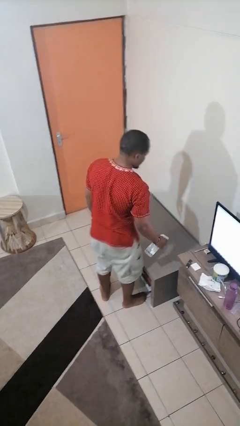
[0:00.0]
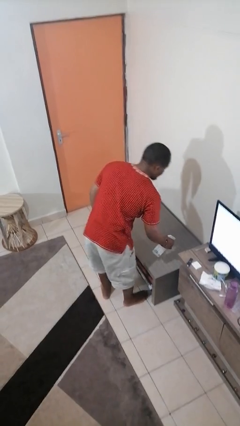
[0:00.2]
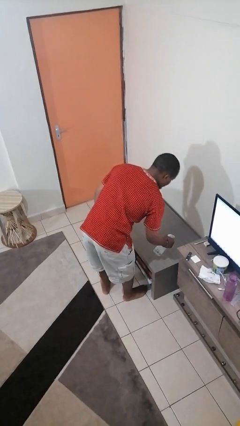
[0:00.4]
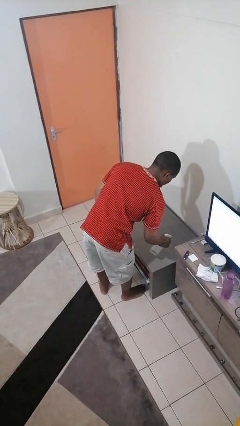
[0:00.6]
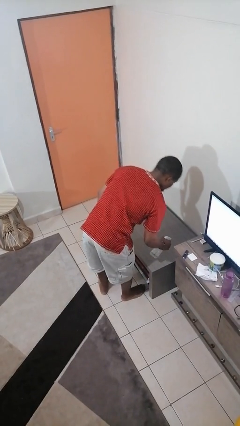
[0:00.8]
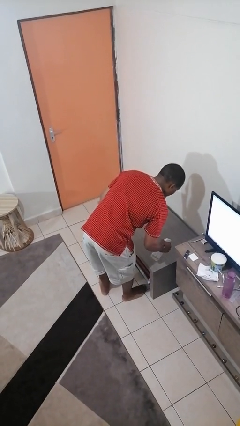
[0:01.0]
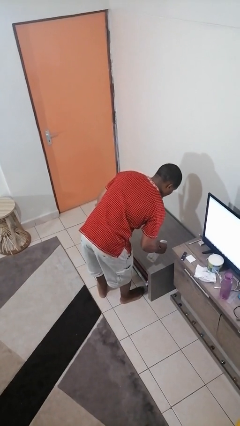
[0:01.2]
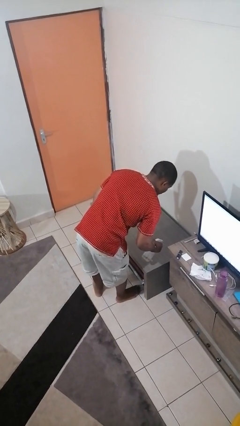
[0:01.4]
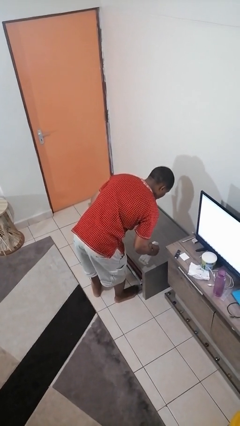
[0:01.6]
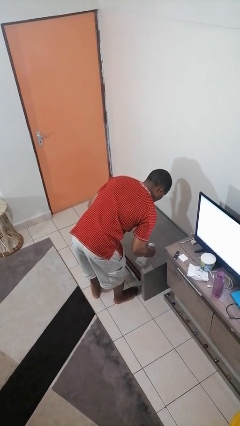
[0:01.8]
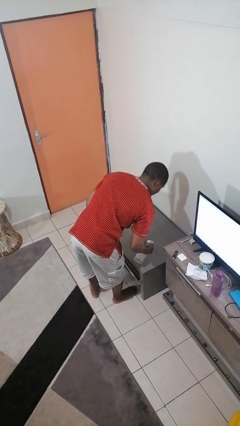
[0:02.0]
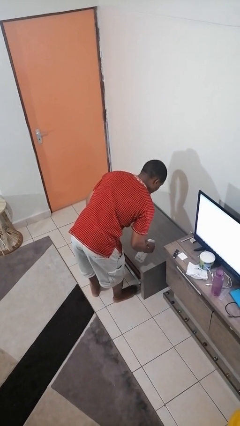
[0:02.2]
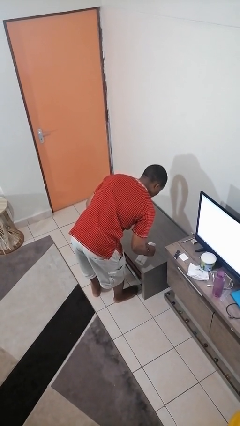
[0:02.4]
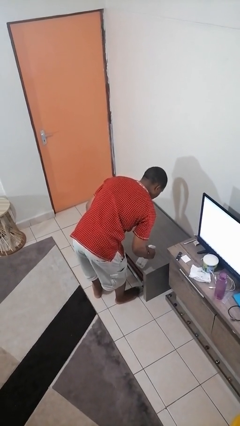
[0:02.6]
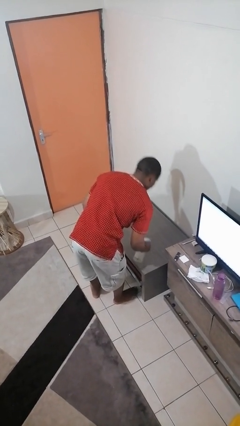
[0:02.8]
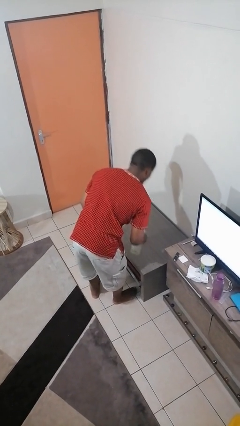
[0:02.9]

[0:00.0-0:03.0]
person sprays from bottle

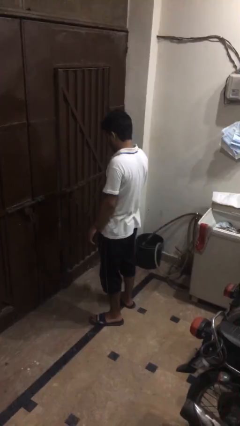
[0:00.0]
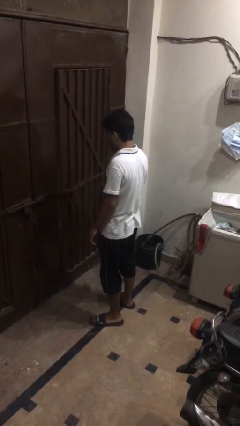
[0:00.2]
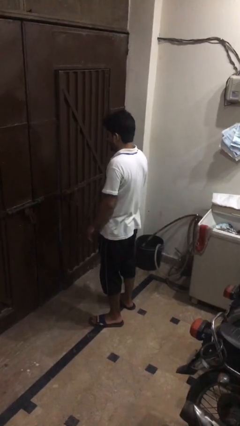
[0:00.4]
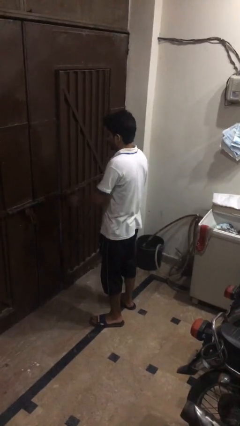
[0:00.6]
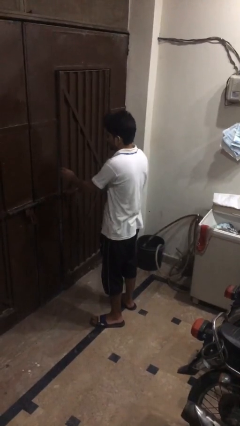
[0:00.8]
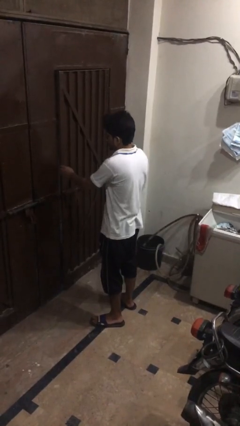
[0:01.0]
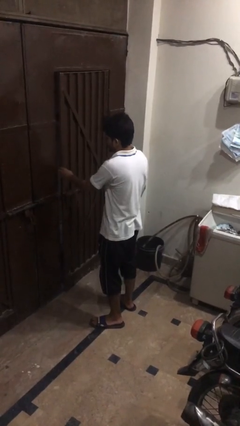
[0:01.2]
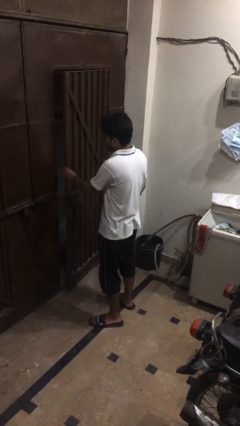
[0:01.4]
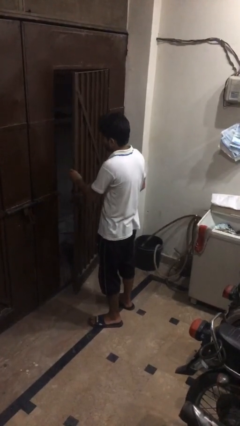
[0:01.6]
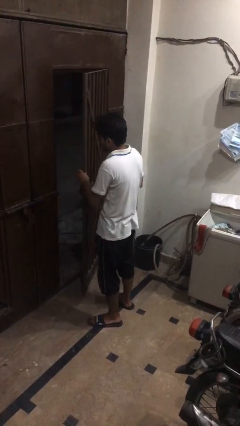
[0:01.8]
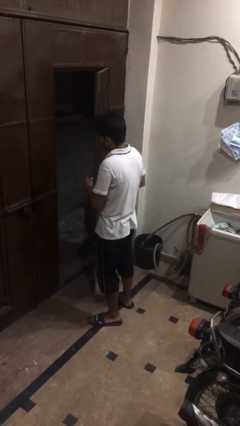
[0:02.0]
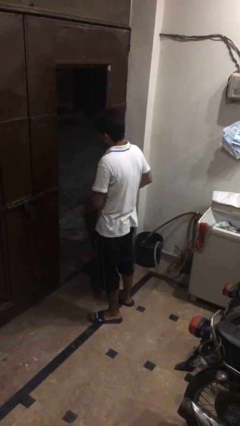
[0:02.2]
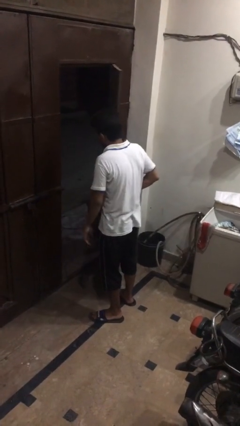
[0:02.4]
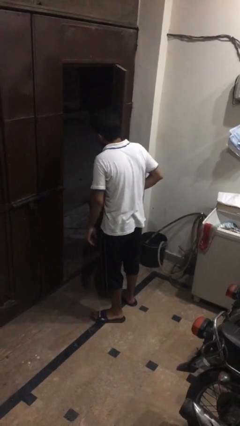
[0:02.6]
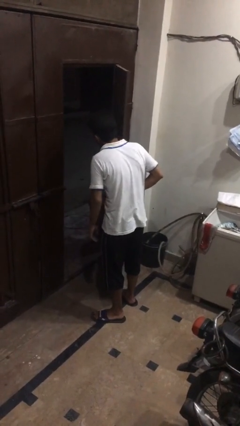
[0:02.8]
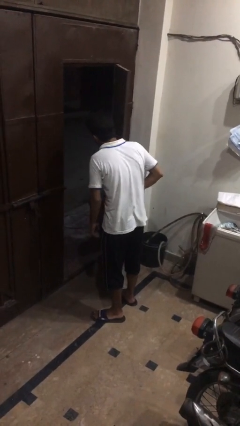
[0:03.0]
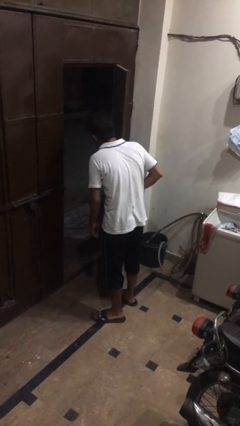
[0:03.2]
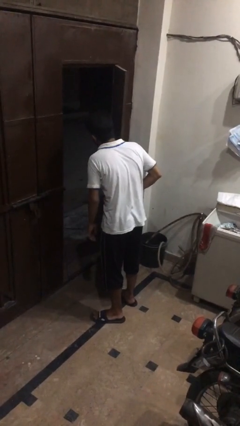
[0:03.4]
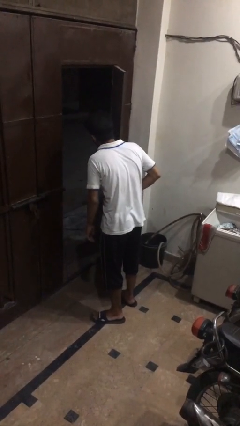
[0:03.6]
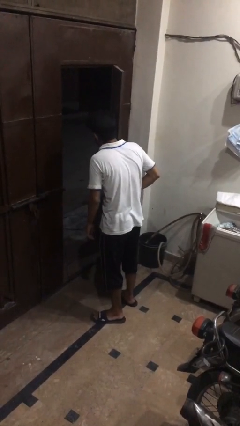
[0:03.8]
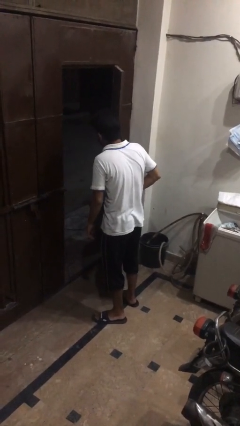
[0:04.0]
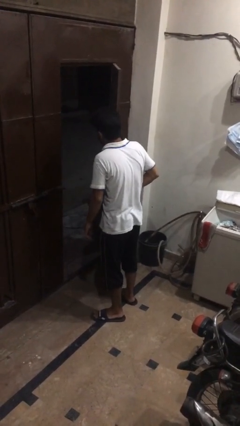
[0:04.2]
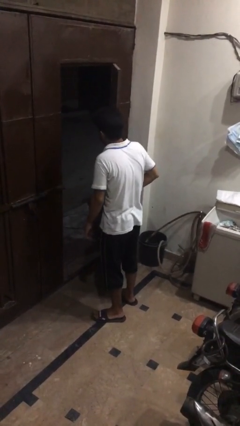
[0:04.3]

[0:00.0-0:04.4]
person opens gate

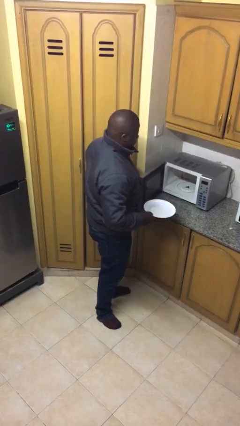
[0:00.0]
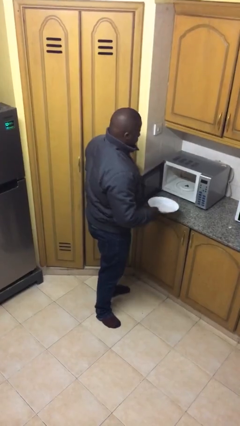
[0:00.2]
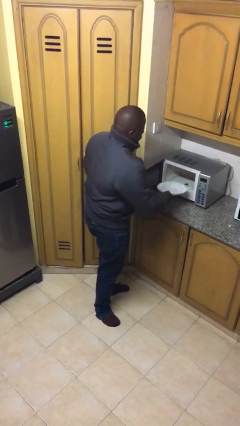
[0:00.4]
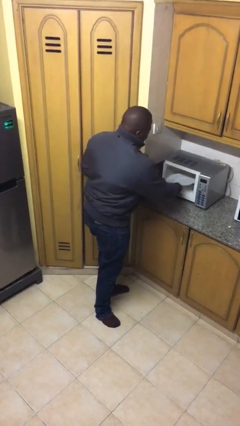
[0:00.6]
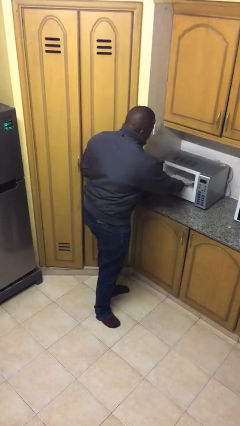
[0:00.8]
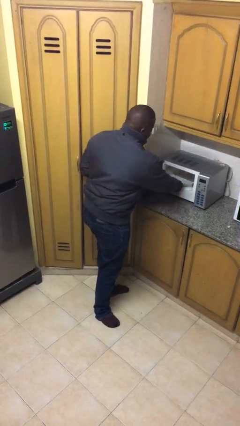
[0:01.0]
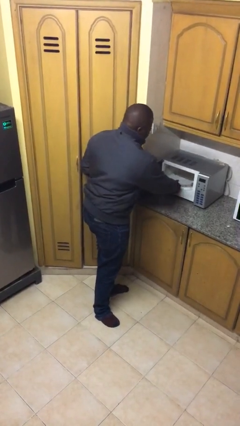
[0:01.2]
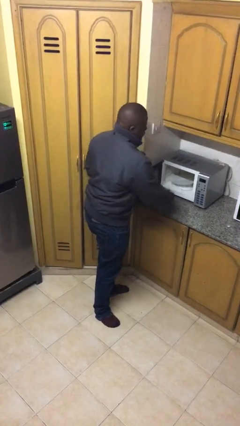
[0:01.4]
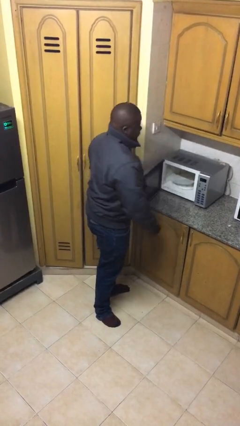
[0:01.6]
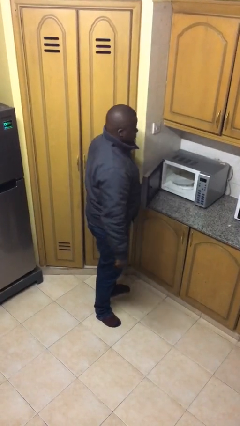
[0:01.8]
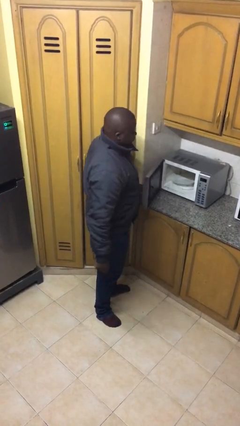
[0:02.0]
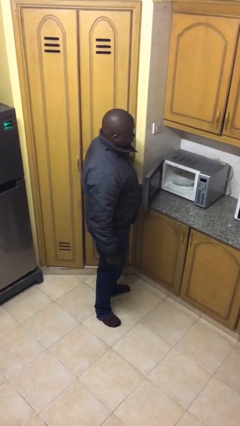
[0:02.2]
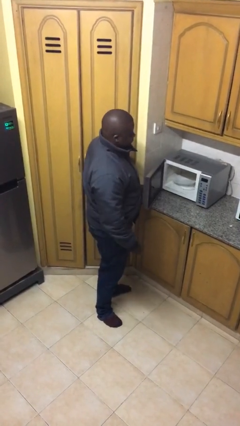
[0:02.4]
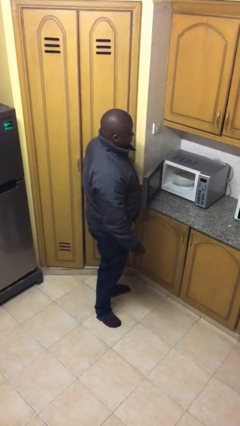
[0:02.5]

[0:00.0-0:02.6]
person puts object into microwave

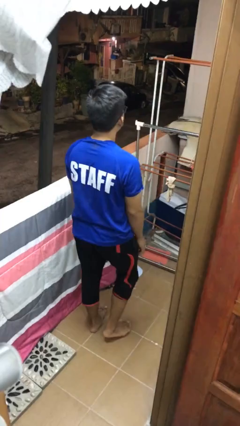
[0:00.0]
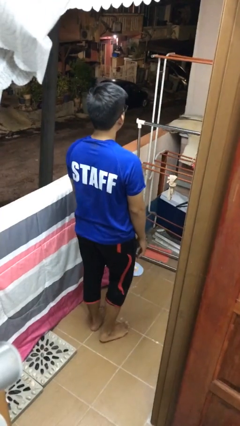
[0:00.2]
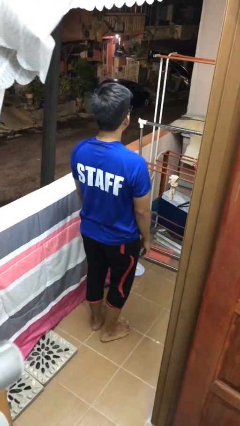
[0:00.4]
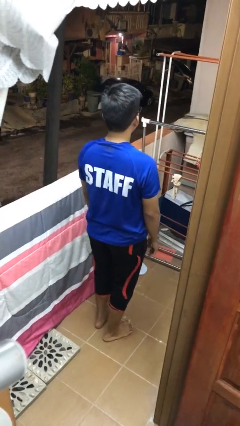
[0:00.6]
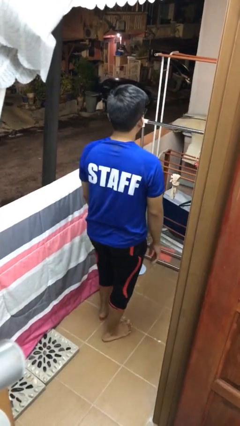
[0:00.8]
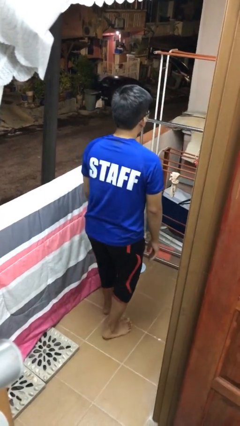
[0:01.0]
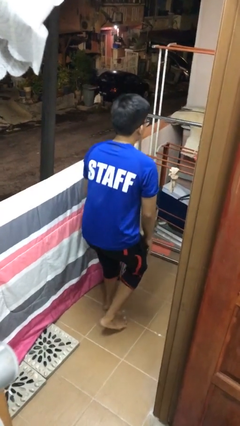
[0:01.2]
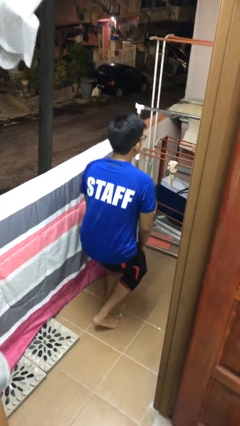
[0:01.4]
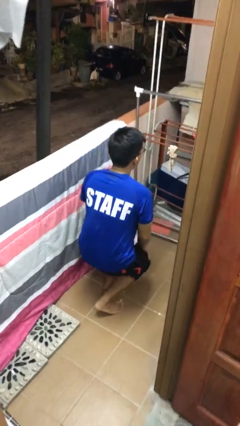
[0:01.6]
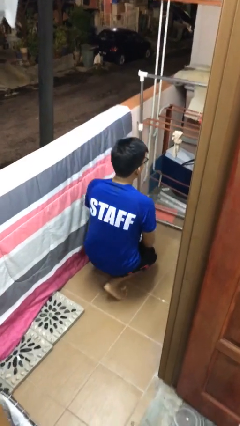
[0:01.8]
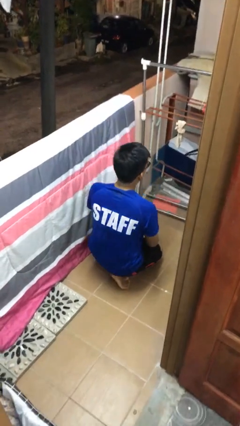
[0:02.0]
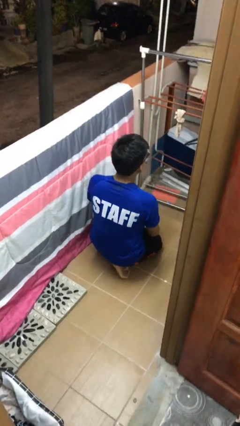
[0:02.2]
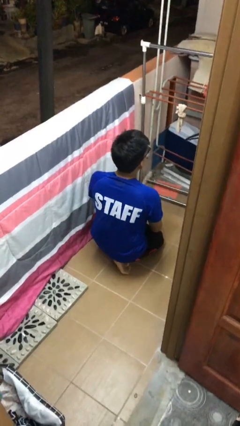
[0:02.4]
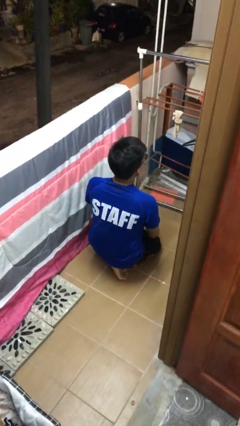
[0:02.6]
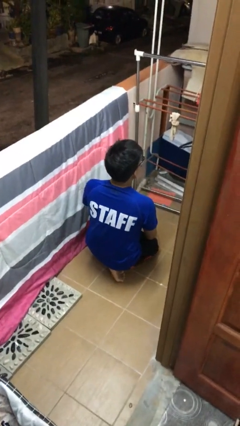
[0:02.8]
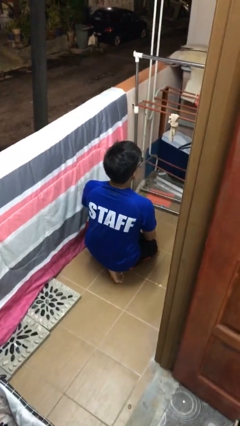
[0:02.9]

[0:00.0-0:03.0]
person kneels

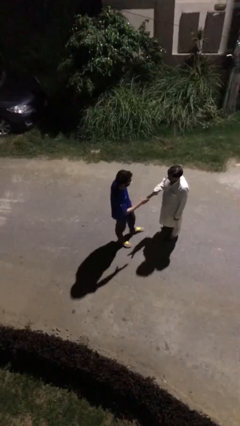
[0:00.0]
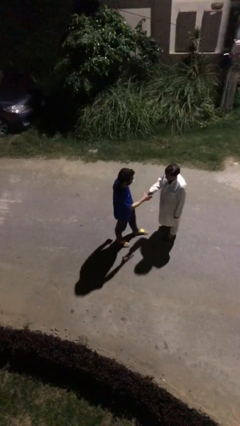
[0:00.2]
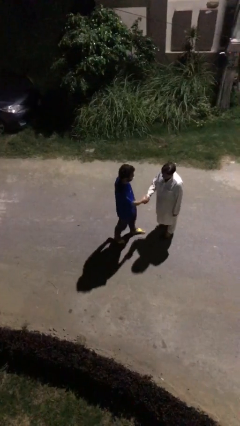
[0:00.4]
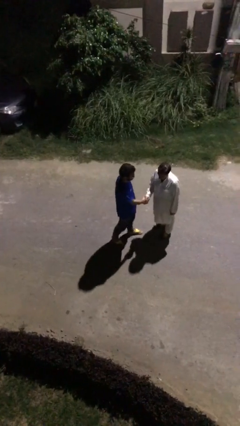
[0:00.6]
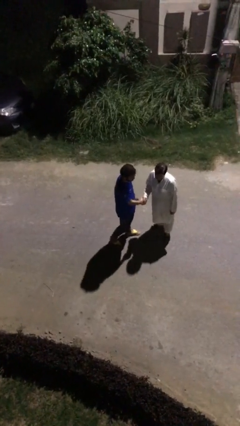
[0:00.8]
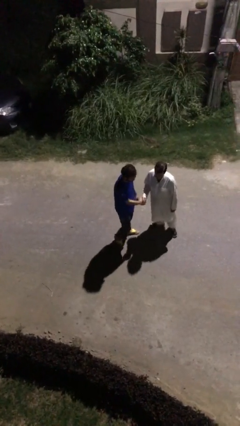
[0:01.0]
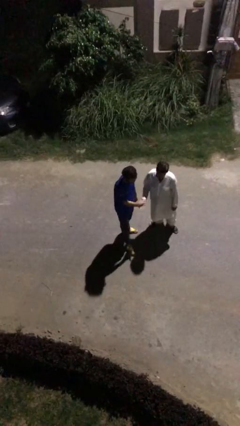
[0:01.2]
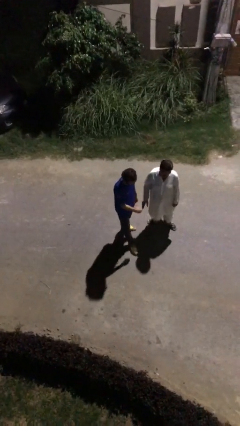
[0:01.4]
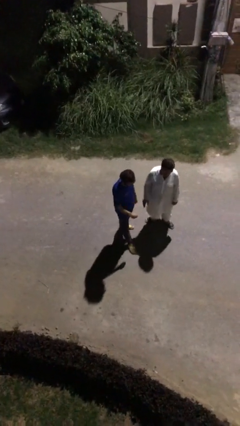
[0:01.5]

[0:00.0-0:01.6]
person shakes hand

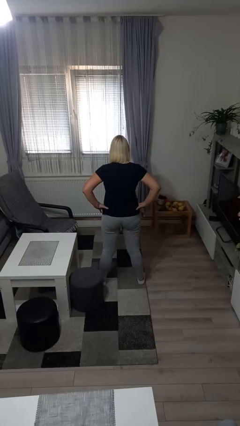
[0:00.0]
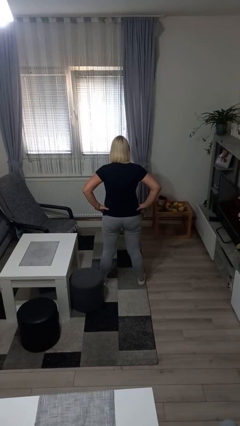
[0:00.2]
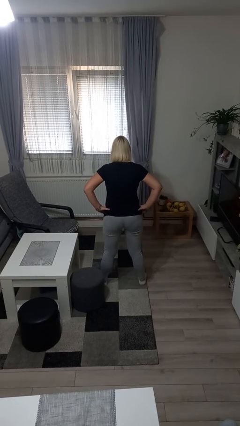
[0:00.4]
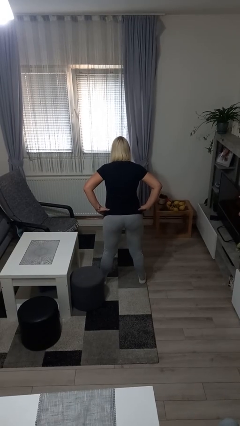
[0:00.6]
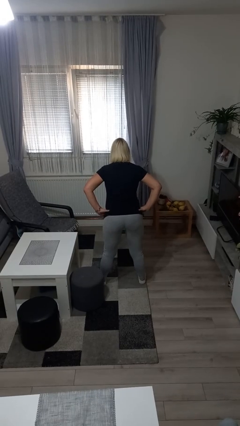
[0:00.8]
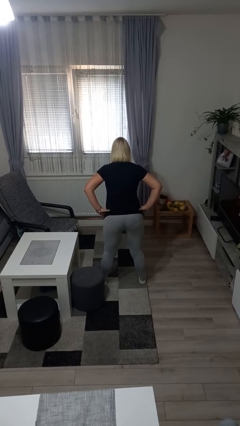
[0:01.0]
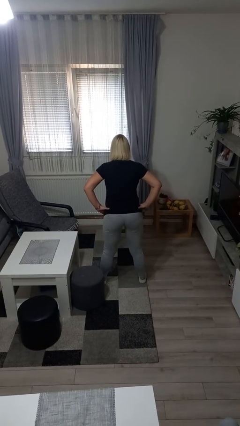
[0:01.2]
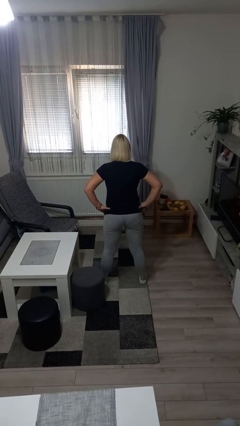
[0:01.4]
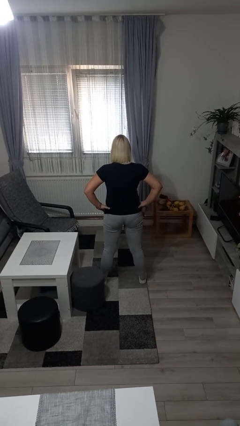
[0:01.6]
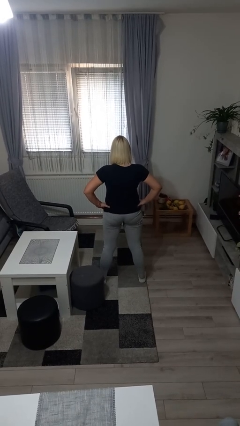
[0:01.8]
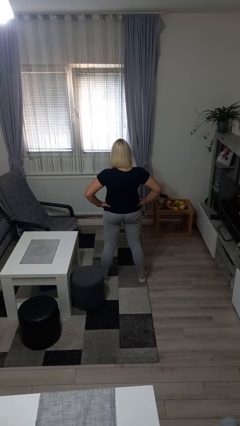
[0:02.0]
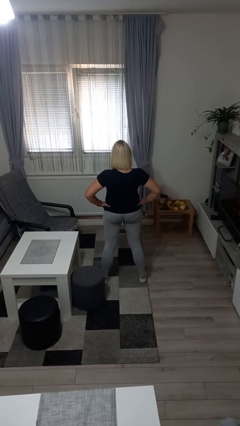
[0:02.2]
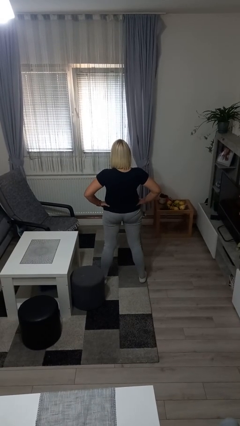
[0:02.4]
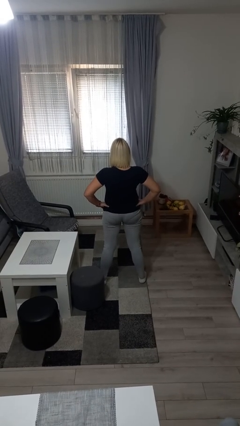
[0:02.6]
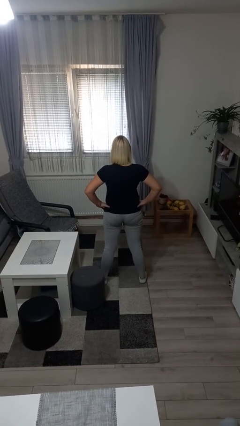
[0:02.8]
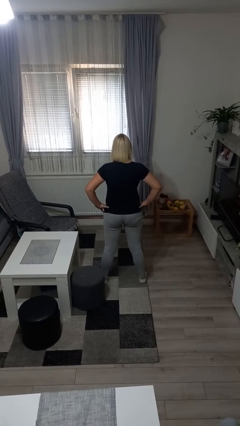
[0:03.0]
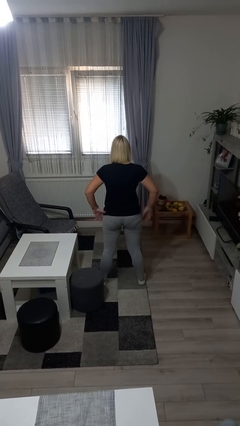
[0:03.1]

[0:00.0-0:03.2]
person wiggles hips
